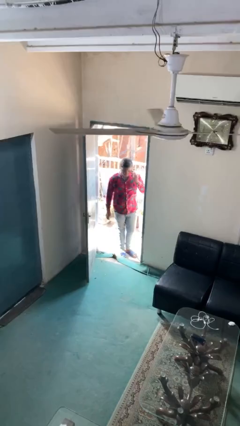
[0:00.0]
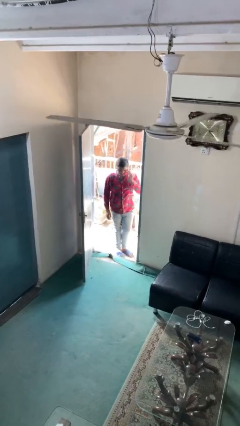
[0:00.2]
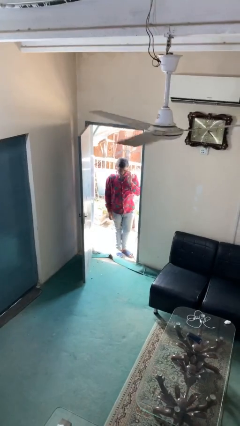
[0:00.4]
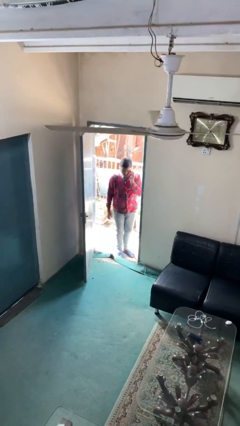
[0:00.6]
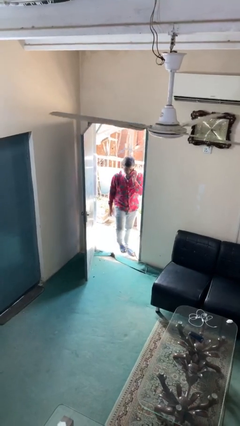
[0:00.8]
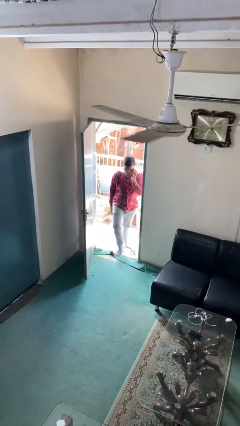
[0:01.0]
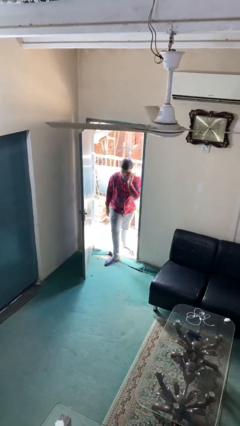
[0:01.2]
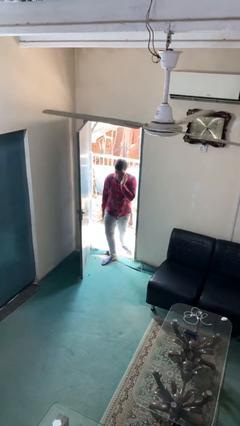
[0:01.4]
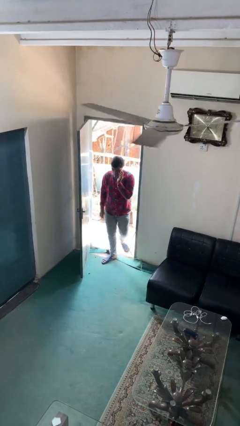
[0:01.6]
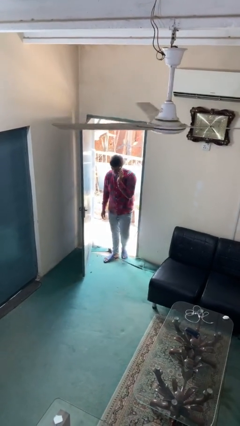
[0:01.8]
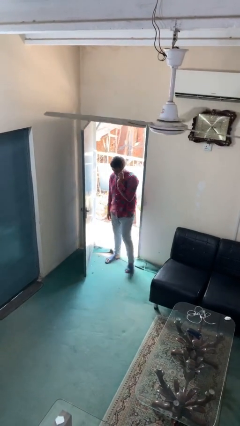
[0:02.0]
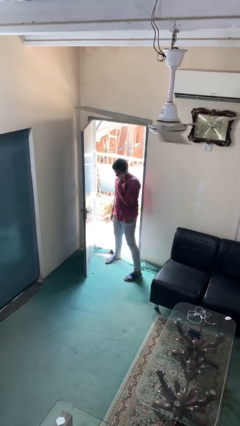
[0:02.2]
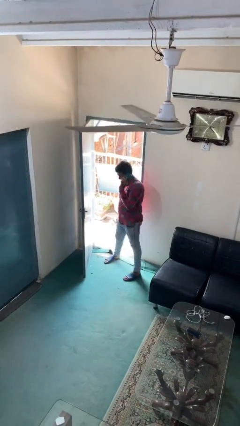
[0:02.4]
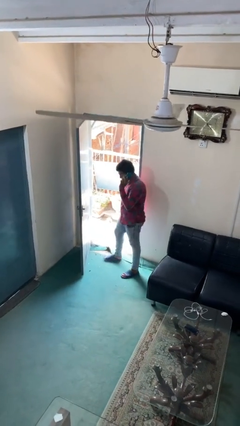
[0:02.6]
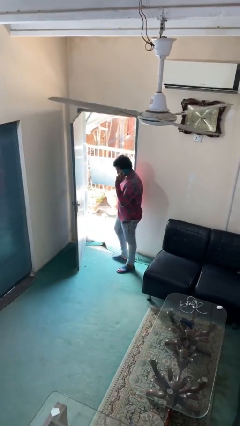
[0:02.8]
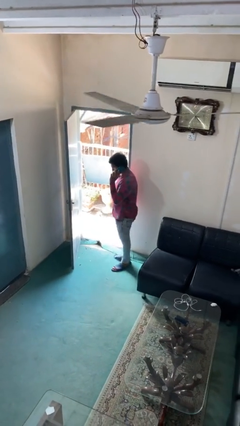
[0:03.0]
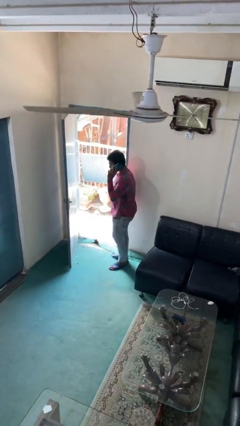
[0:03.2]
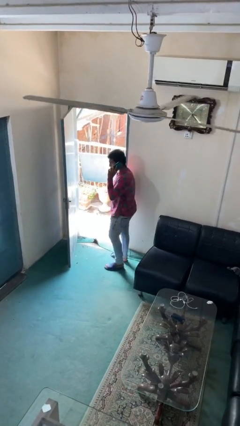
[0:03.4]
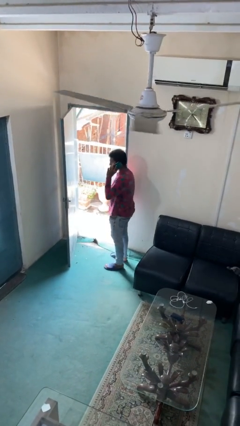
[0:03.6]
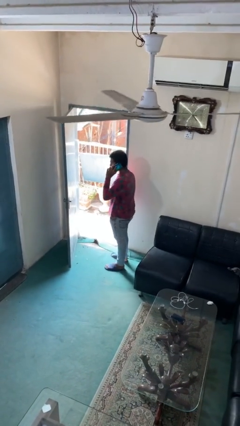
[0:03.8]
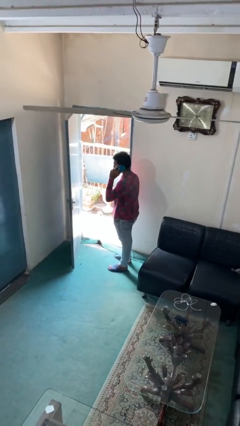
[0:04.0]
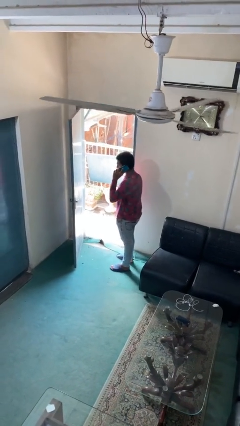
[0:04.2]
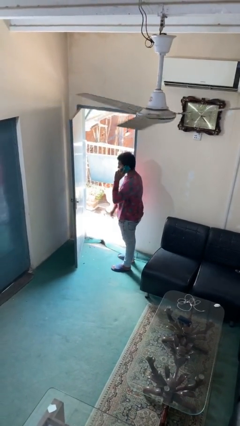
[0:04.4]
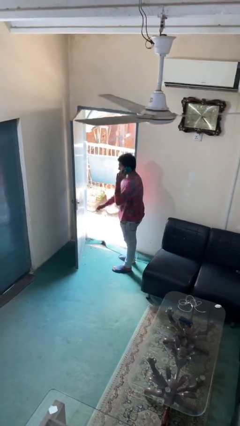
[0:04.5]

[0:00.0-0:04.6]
person enters scene through structure

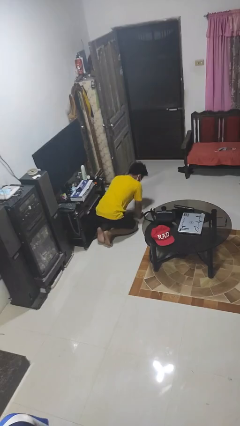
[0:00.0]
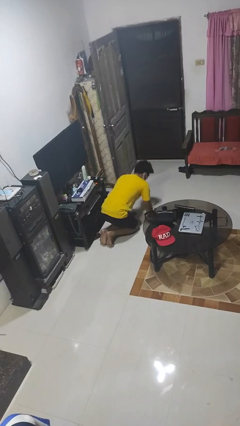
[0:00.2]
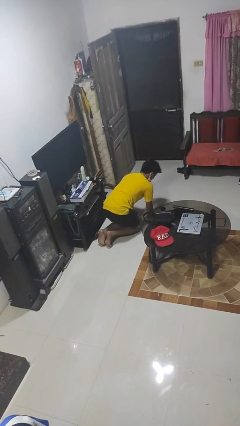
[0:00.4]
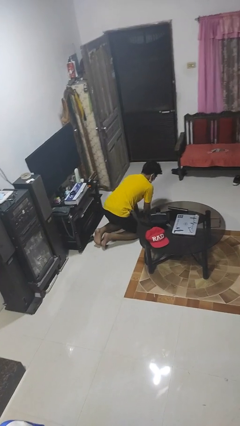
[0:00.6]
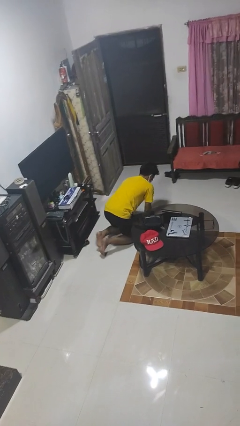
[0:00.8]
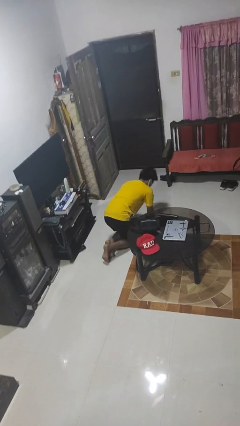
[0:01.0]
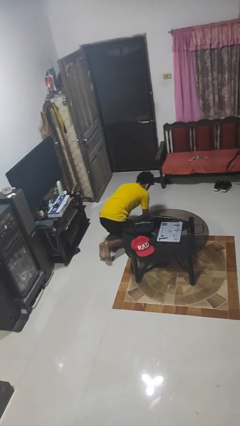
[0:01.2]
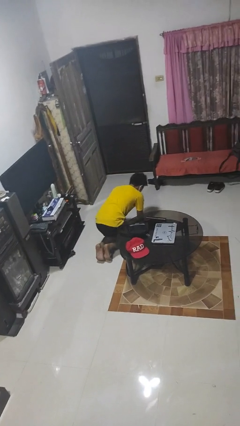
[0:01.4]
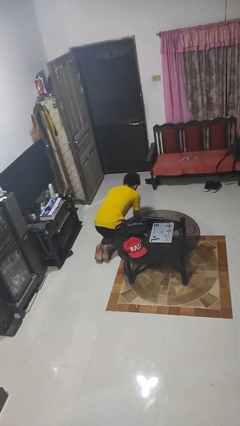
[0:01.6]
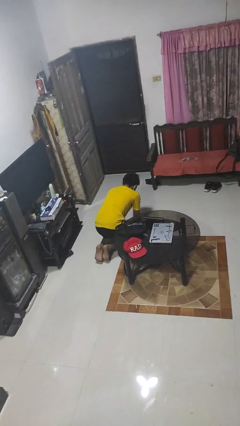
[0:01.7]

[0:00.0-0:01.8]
person crawls

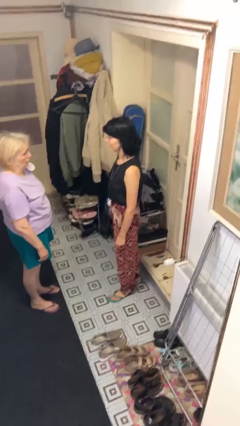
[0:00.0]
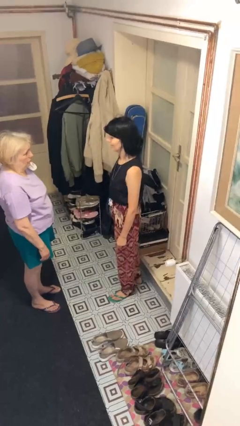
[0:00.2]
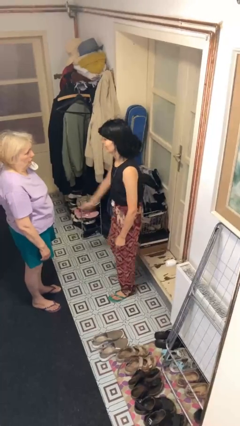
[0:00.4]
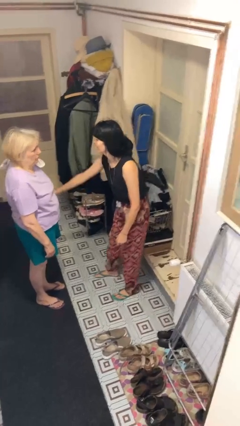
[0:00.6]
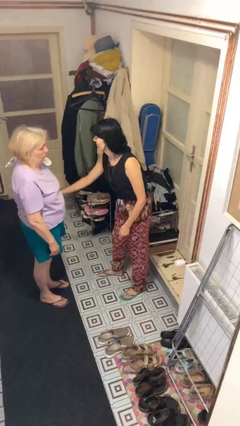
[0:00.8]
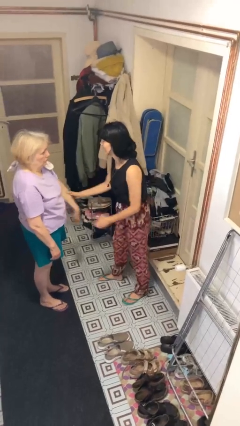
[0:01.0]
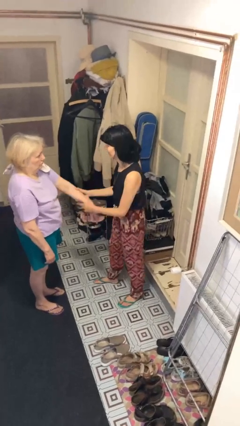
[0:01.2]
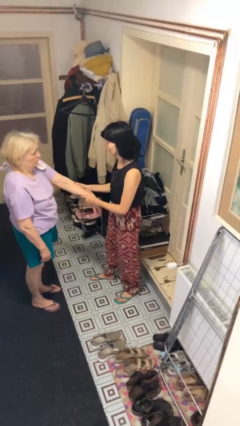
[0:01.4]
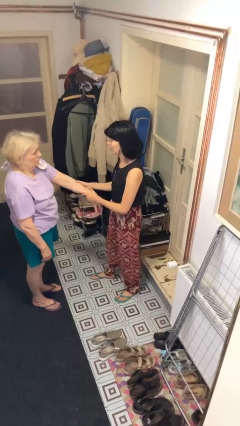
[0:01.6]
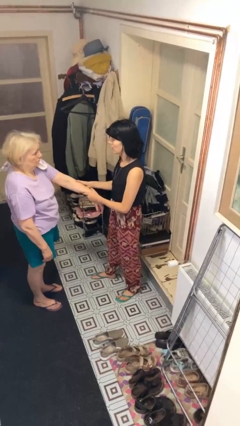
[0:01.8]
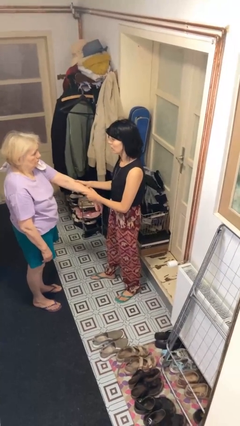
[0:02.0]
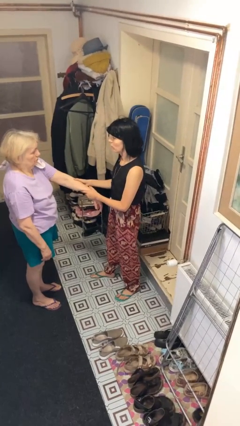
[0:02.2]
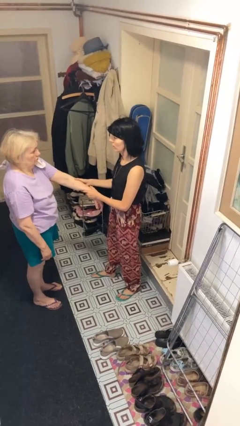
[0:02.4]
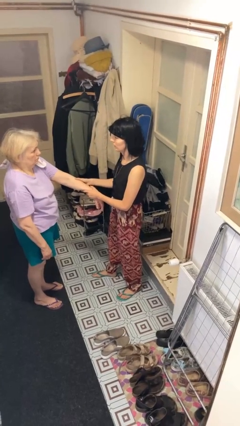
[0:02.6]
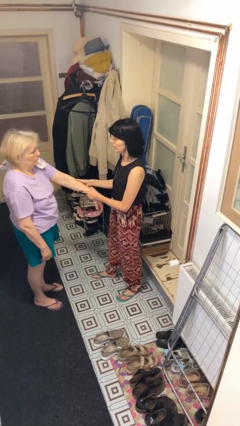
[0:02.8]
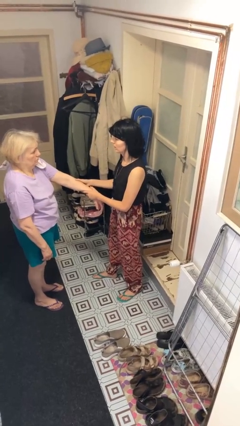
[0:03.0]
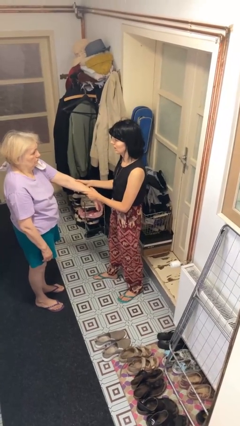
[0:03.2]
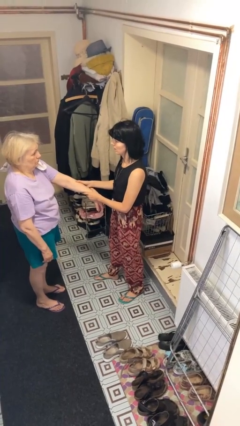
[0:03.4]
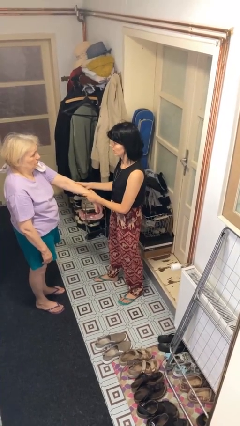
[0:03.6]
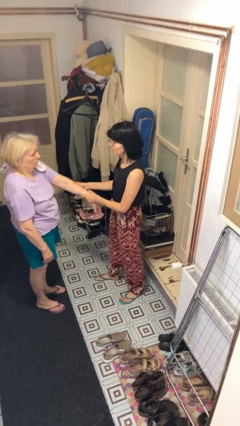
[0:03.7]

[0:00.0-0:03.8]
person grabs person by forearm

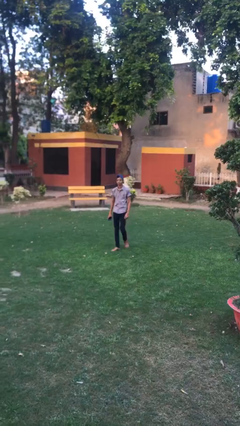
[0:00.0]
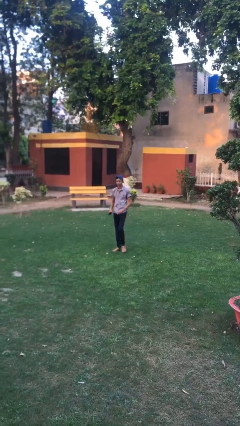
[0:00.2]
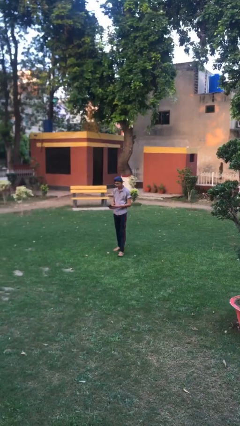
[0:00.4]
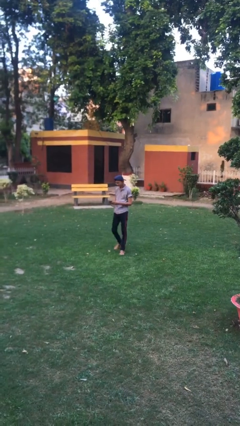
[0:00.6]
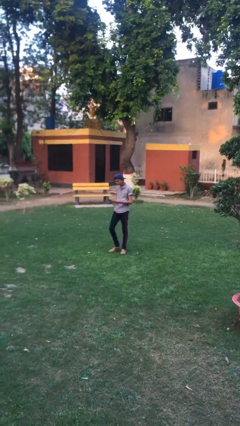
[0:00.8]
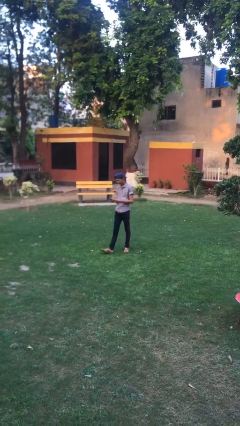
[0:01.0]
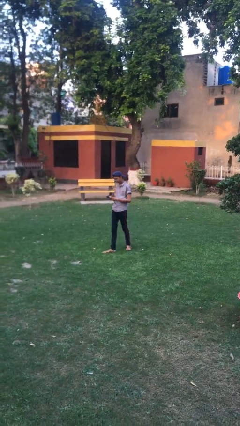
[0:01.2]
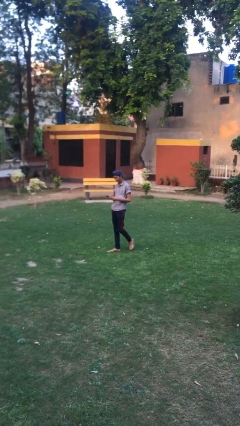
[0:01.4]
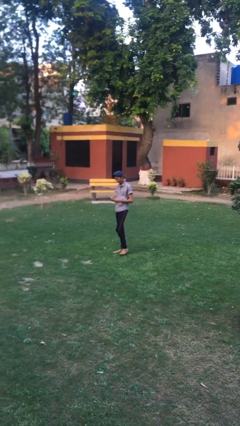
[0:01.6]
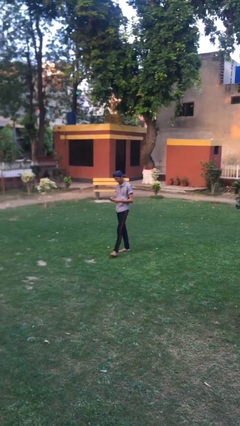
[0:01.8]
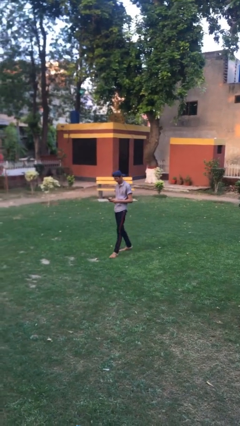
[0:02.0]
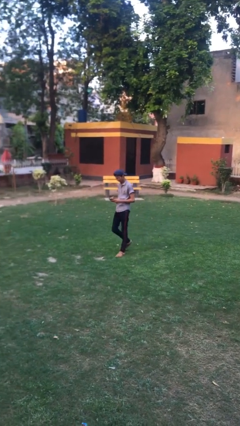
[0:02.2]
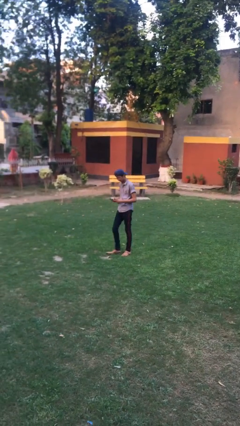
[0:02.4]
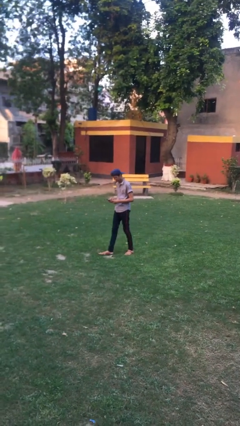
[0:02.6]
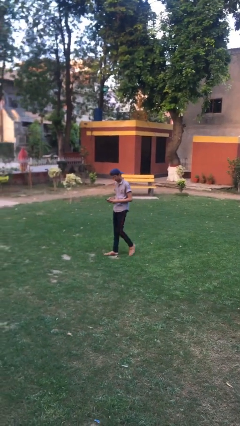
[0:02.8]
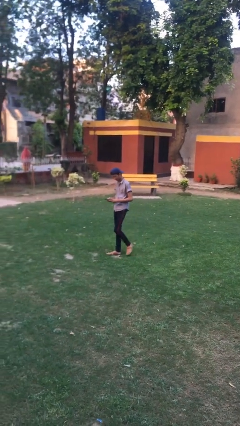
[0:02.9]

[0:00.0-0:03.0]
person texts on phone

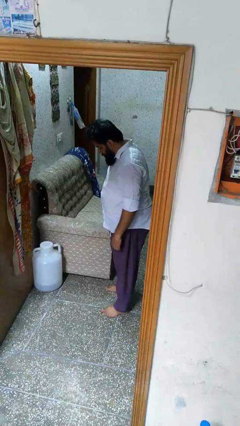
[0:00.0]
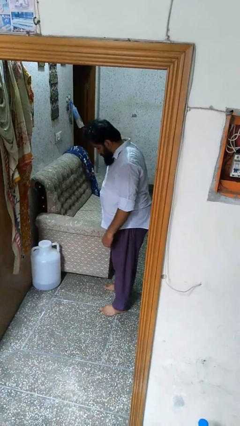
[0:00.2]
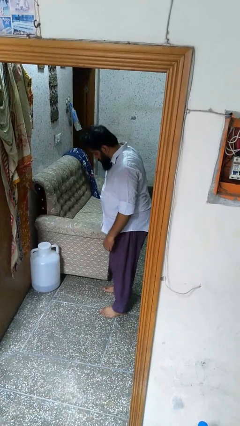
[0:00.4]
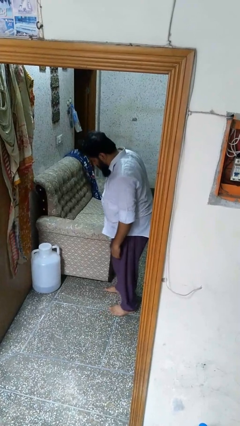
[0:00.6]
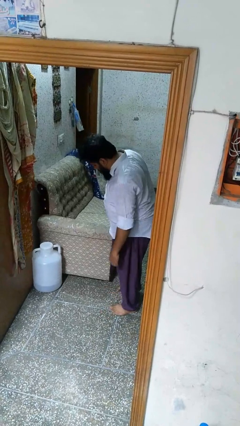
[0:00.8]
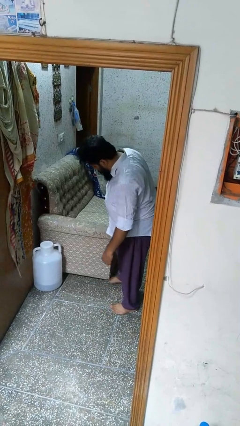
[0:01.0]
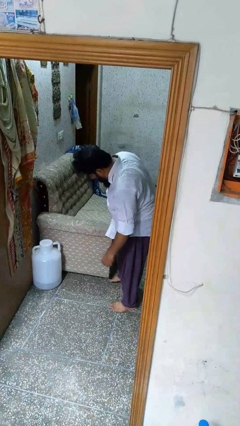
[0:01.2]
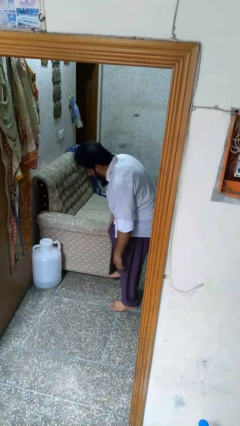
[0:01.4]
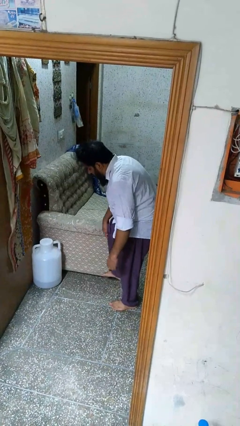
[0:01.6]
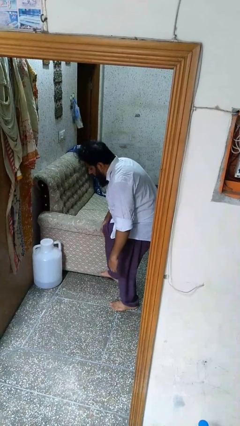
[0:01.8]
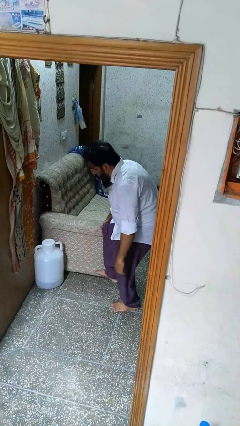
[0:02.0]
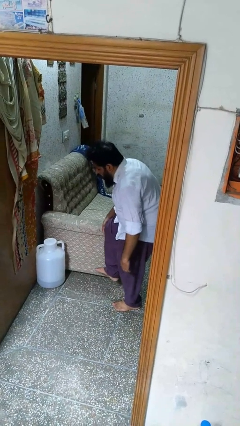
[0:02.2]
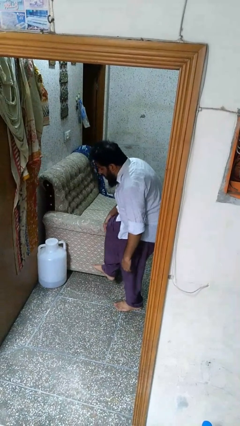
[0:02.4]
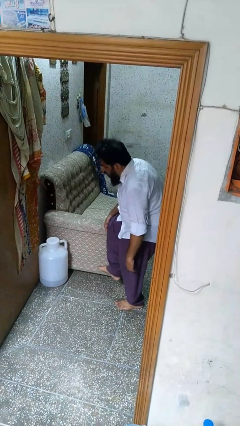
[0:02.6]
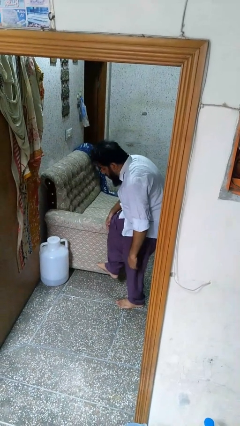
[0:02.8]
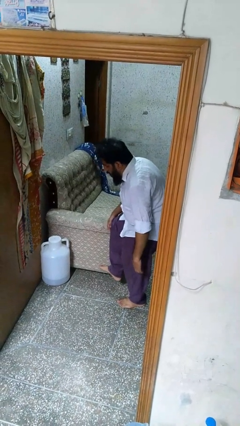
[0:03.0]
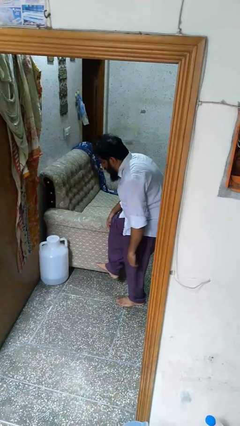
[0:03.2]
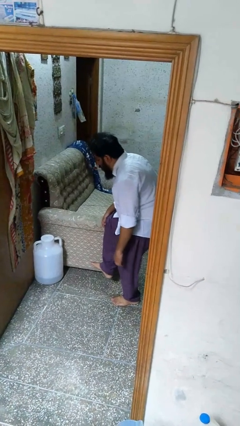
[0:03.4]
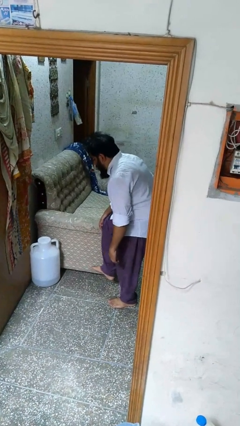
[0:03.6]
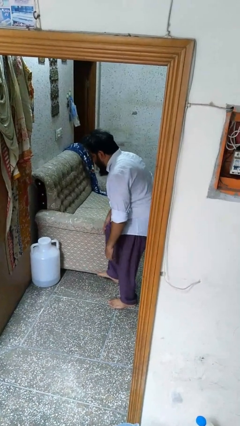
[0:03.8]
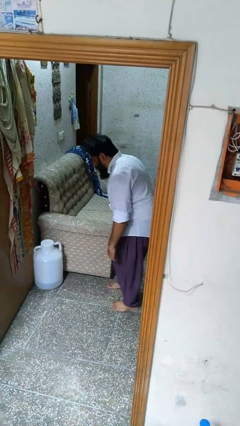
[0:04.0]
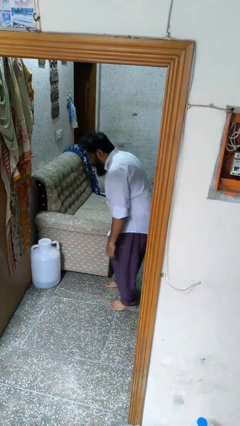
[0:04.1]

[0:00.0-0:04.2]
person stubs toe

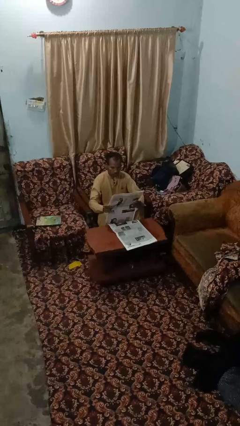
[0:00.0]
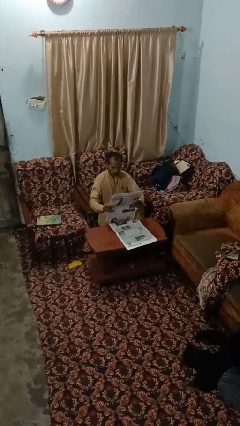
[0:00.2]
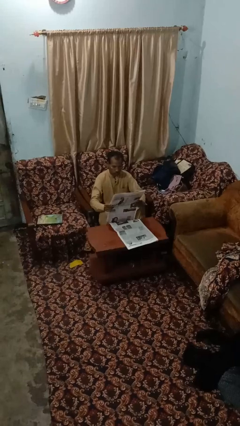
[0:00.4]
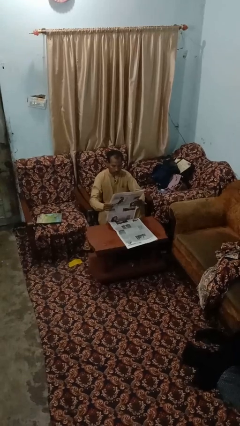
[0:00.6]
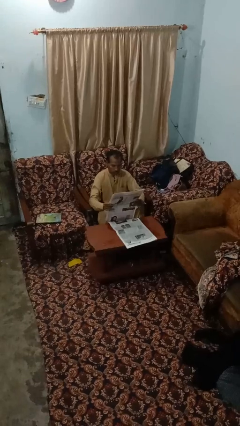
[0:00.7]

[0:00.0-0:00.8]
person reads newspaper
